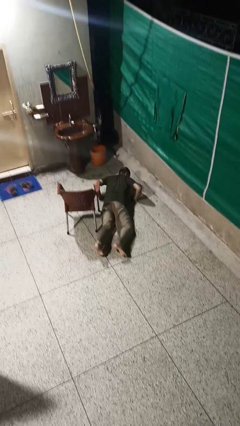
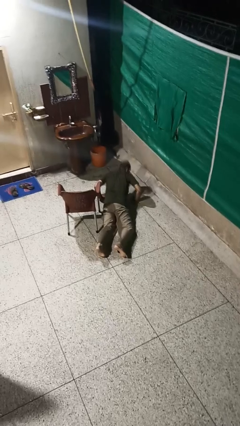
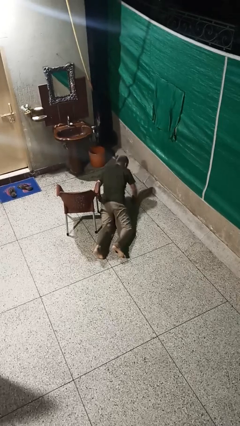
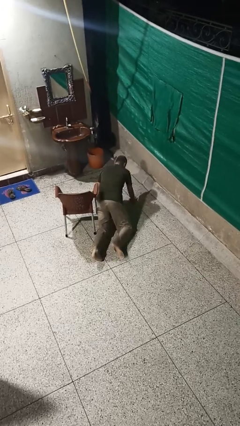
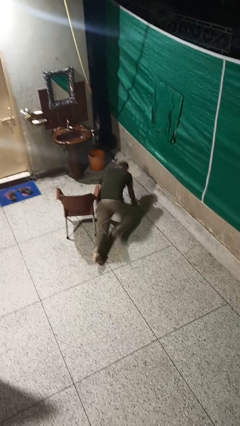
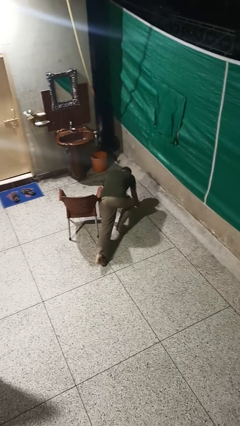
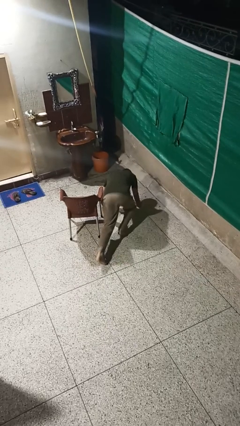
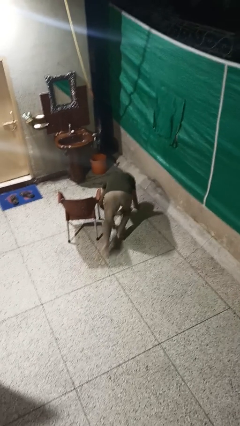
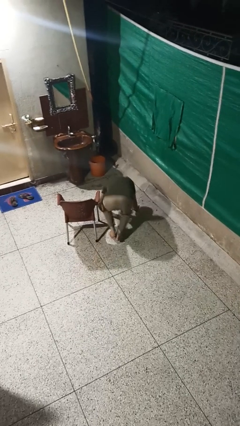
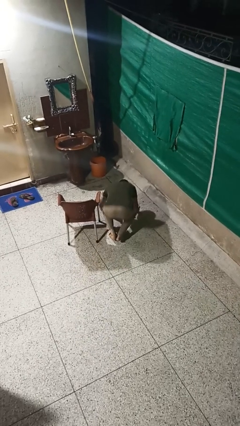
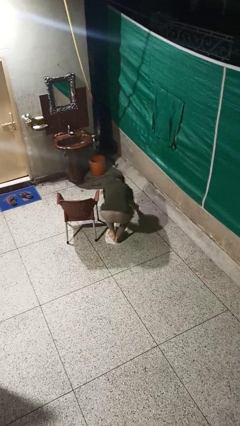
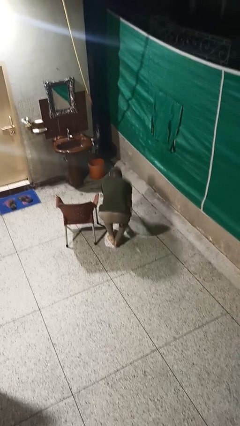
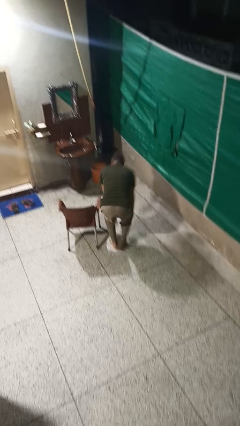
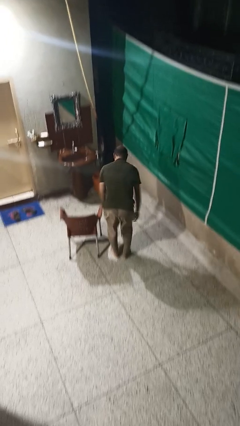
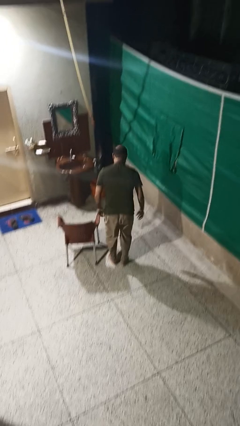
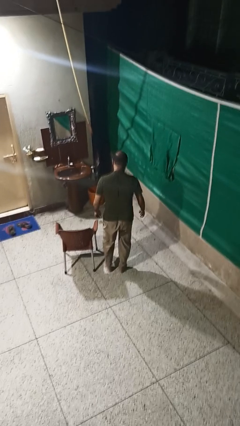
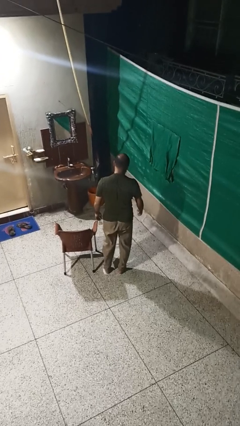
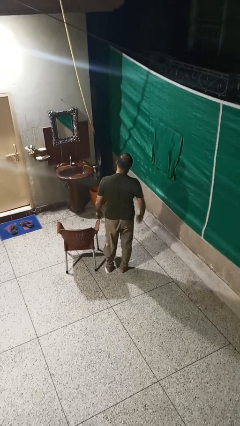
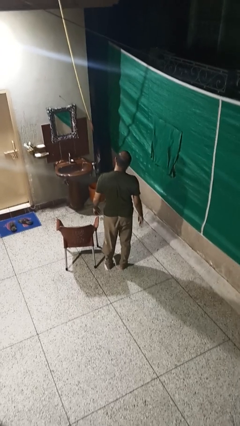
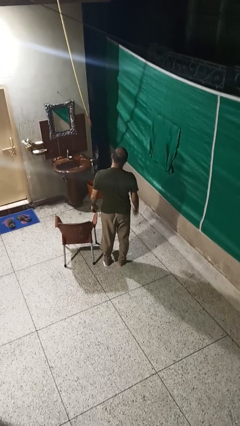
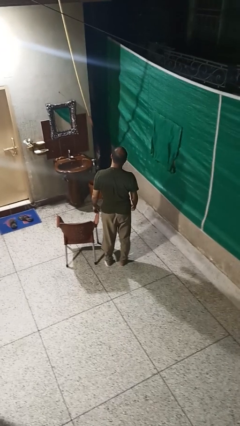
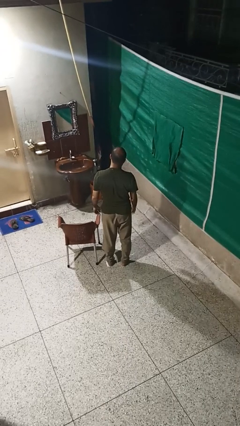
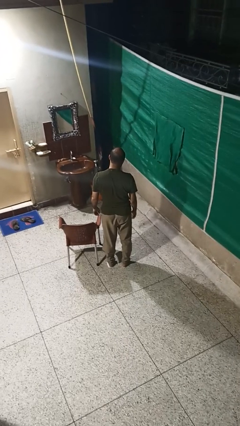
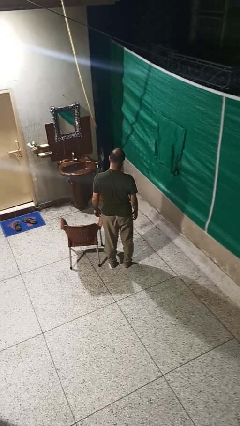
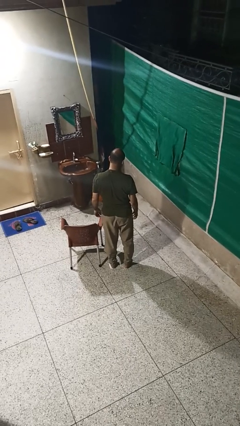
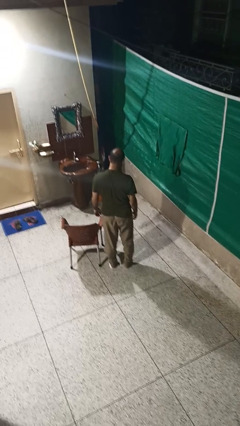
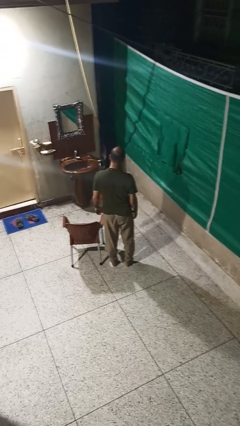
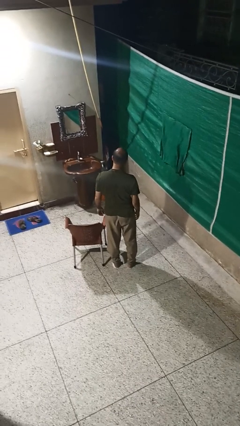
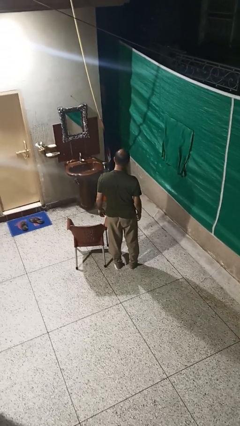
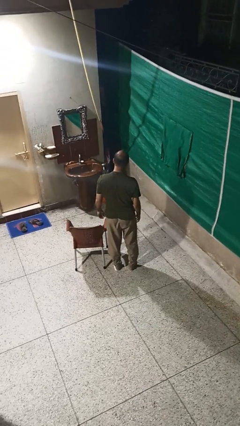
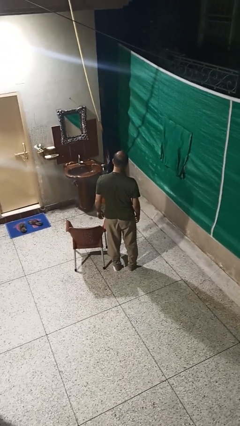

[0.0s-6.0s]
person stands up from floor

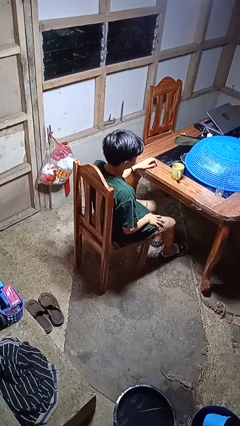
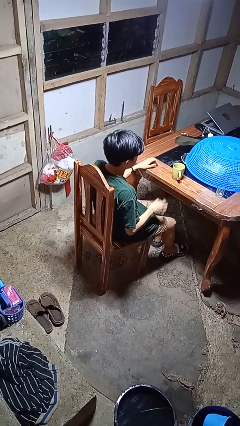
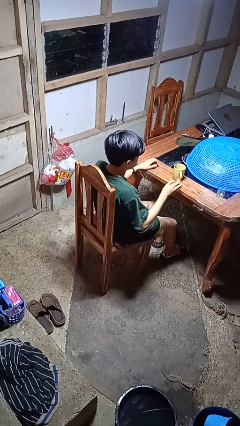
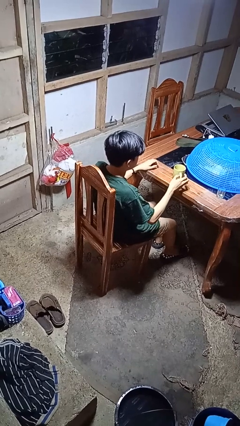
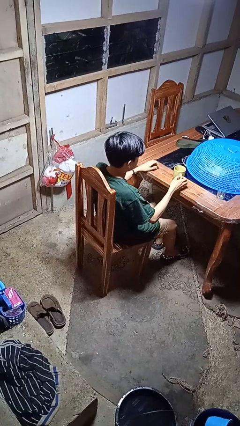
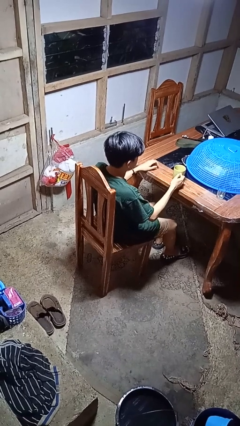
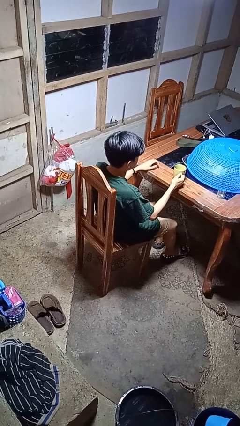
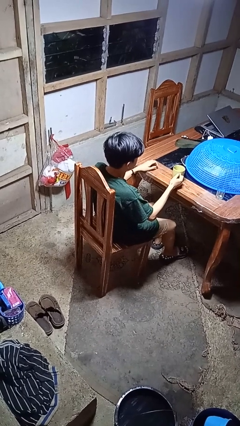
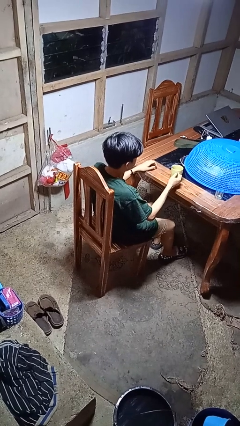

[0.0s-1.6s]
person picks up object from table

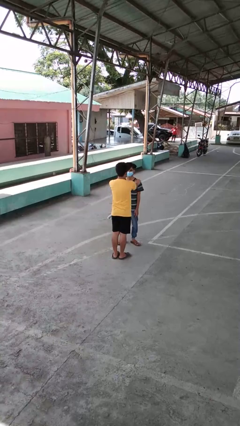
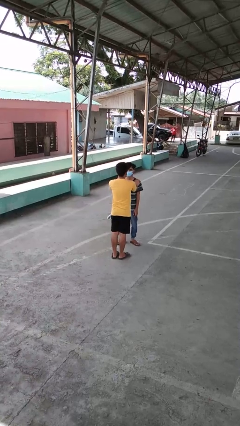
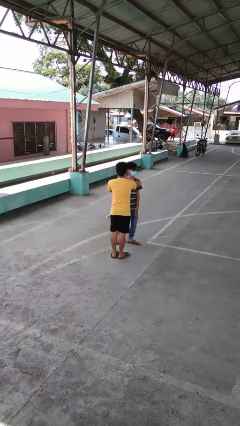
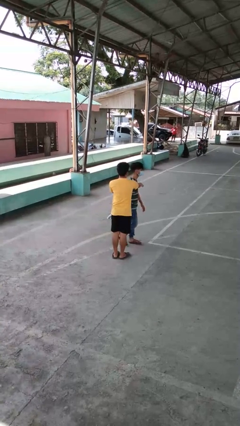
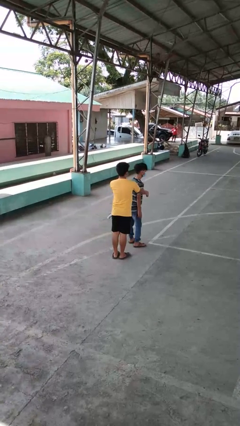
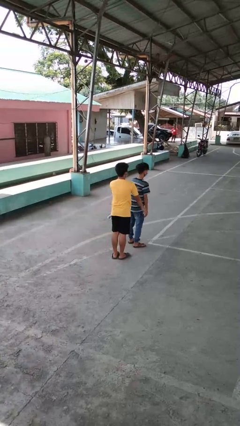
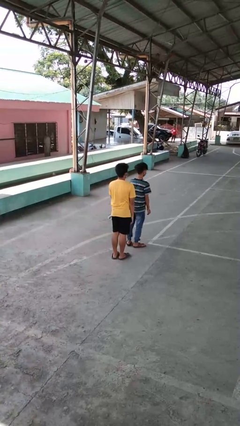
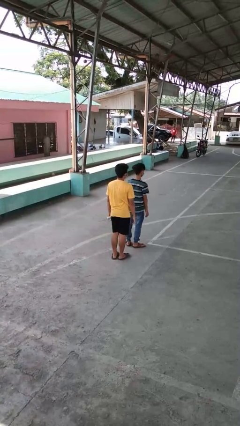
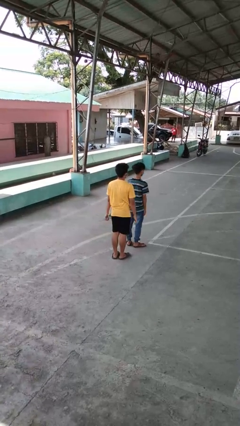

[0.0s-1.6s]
person spins person around

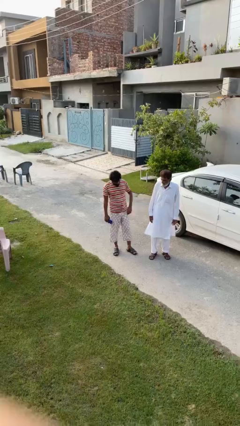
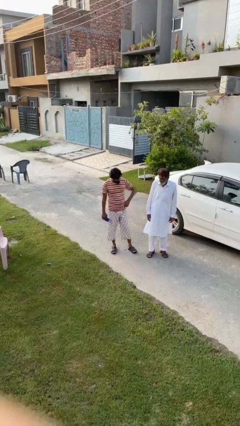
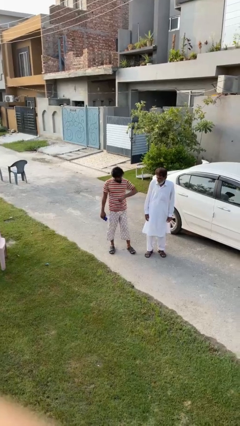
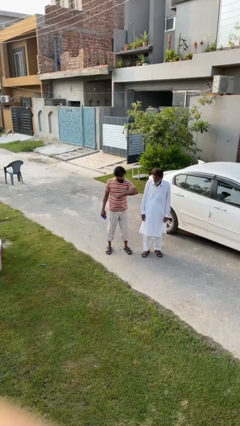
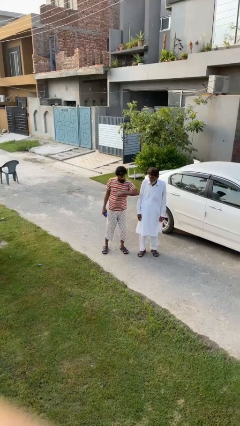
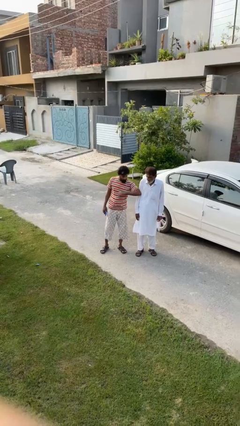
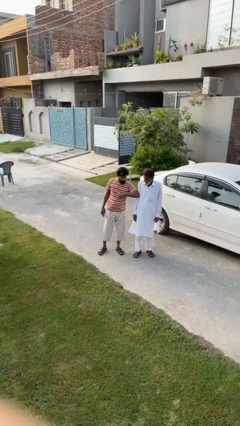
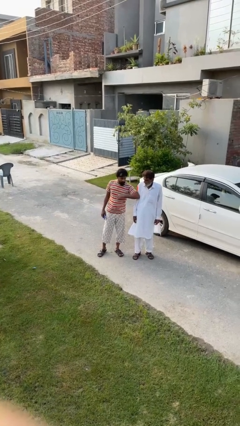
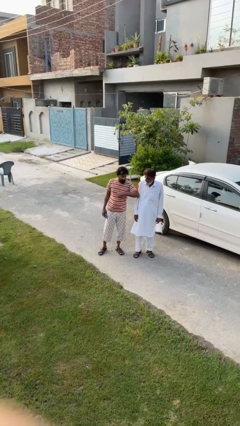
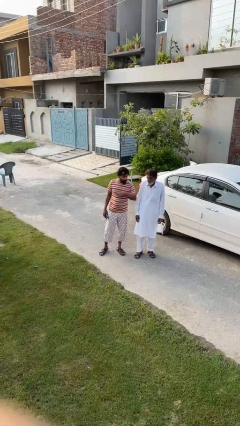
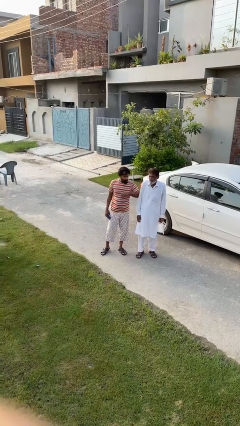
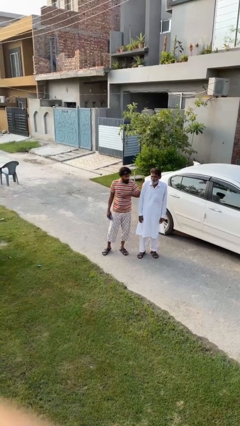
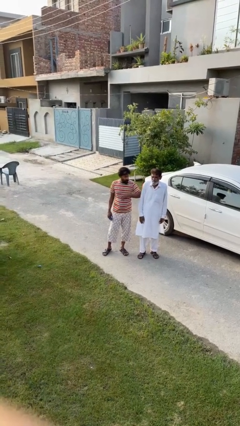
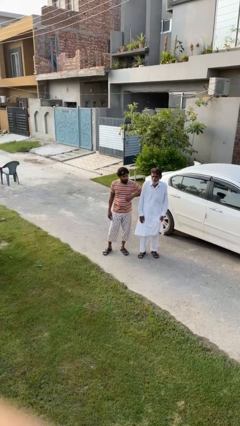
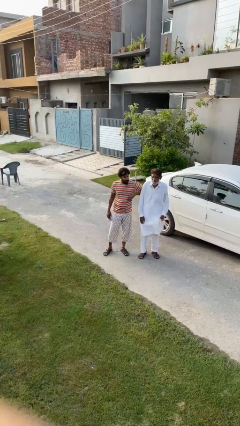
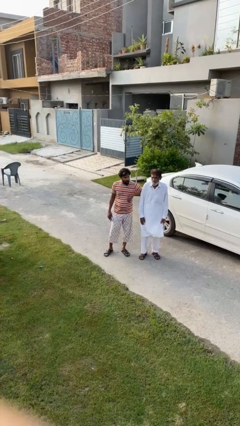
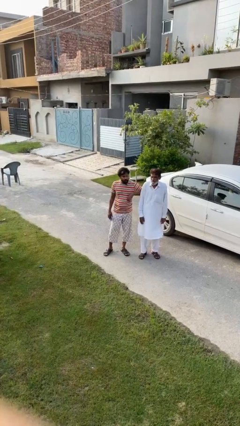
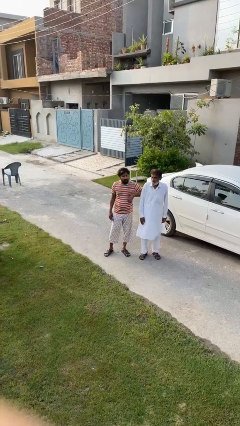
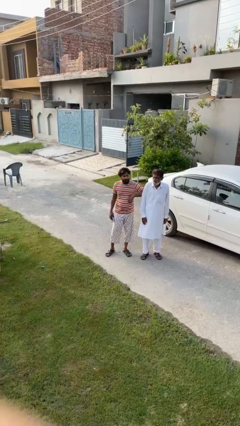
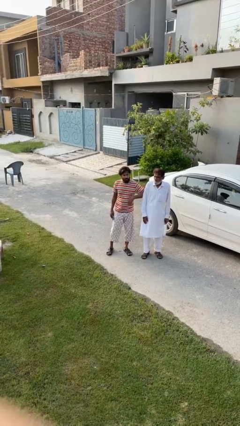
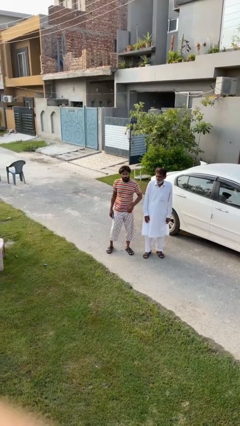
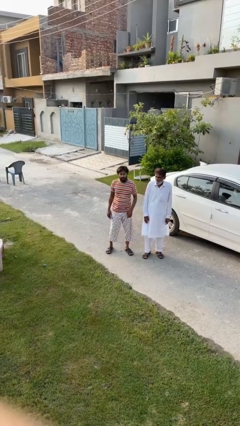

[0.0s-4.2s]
person nudges person with elbow

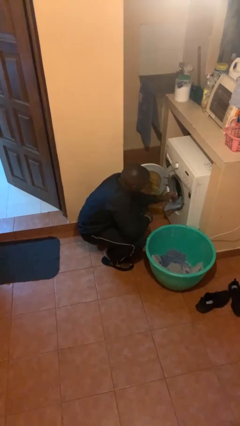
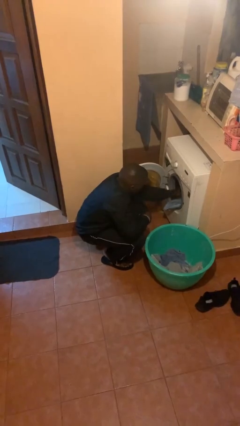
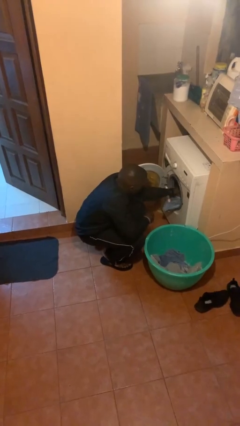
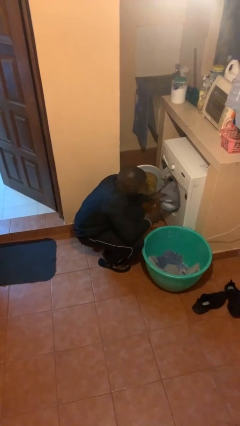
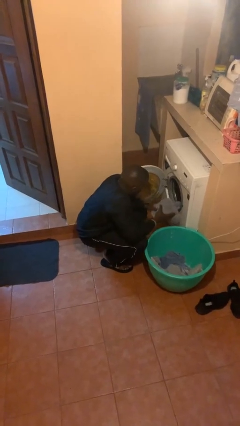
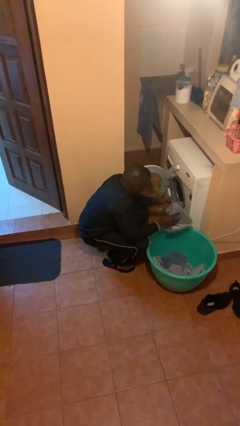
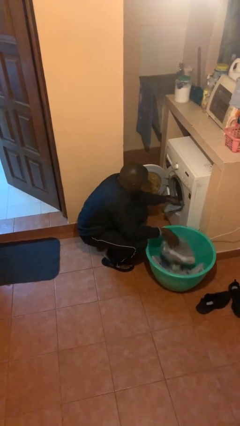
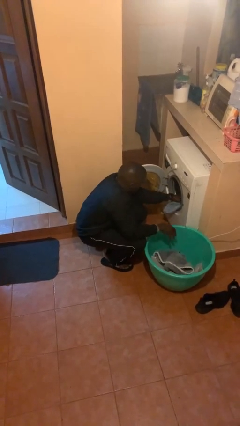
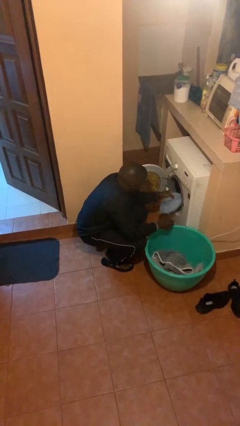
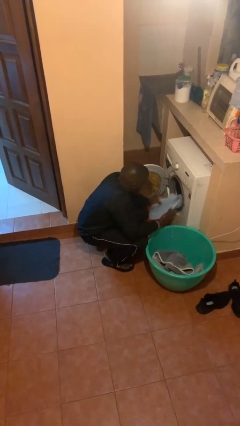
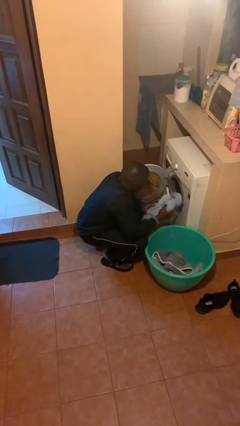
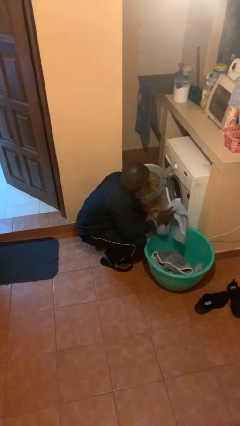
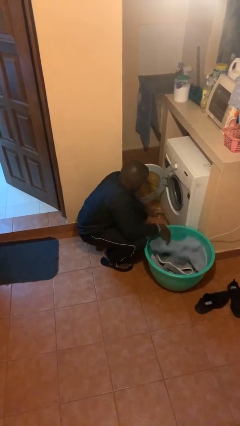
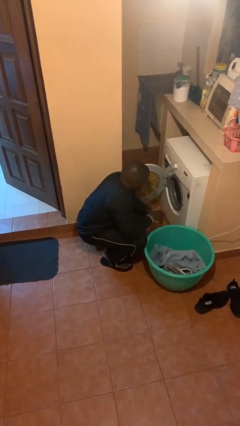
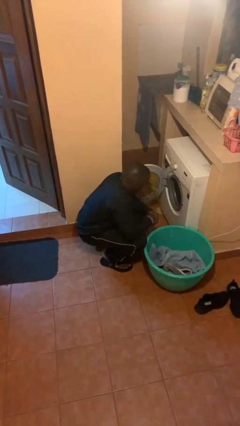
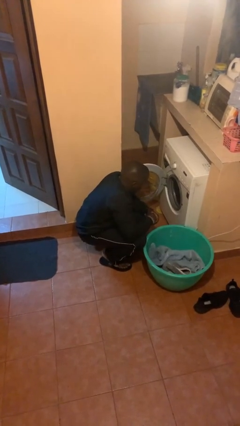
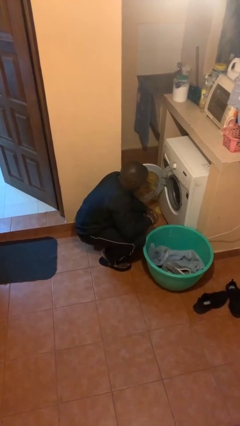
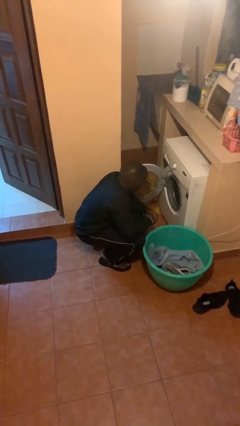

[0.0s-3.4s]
person loads clotheswasher

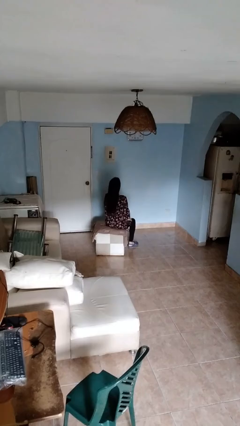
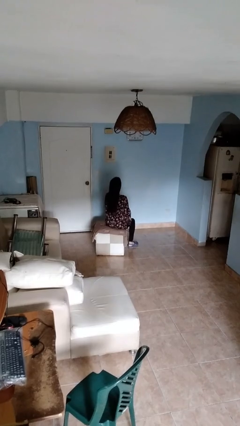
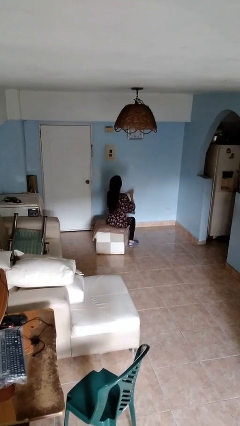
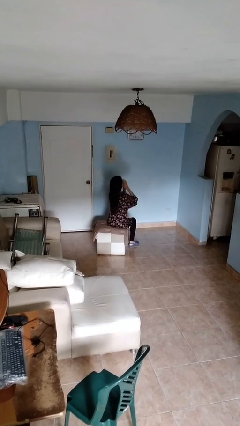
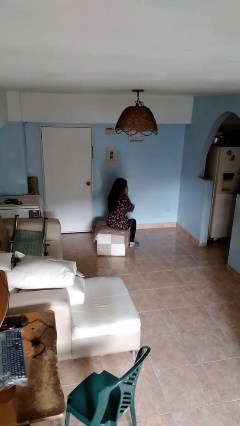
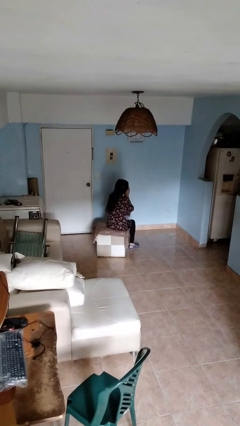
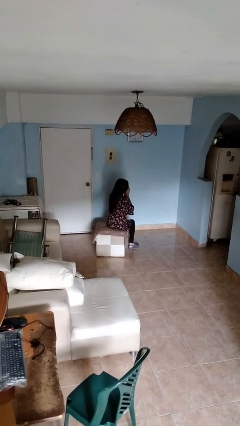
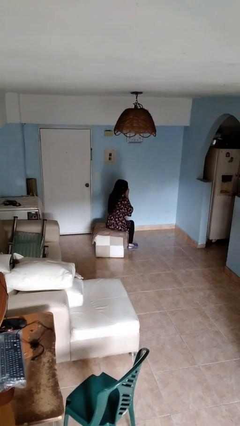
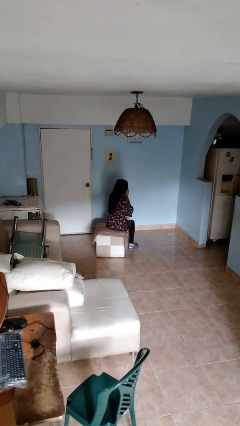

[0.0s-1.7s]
person sneezes into hand
